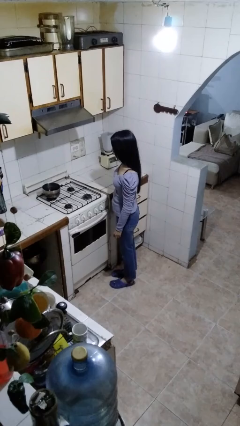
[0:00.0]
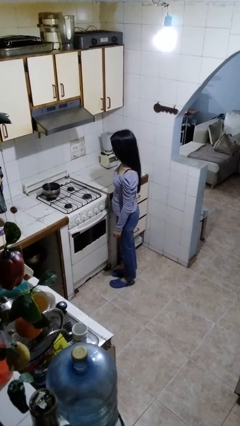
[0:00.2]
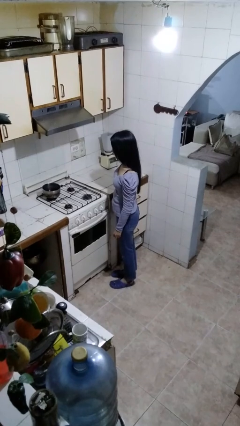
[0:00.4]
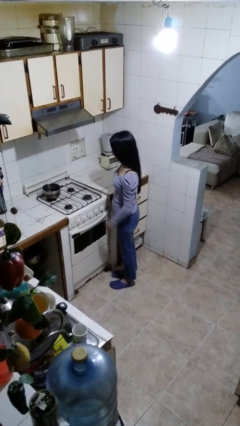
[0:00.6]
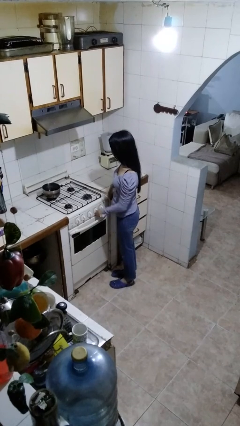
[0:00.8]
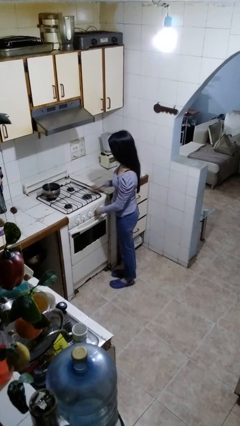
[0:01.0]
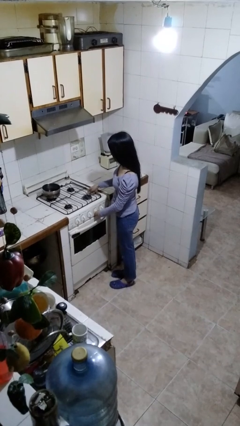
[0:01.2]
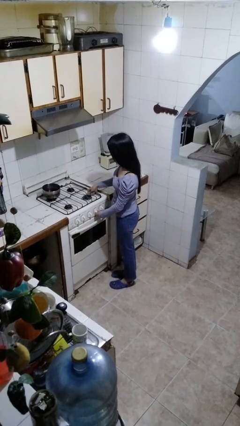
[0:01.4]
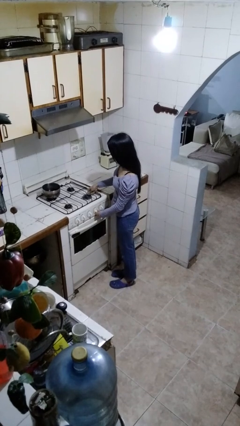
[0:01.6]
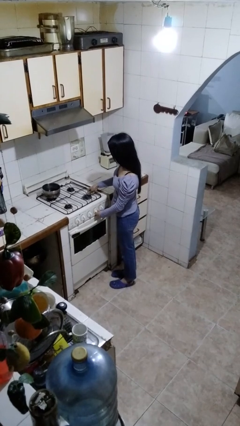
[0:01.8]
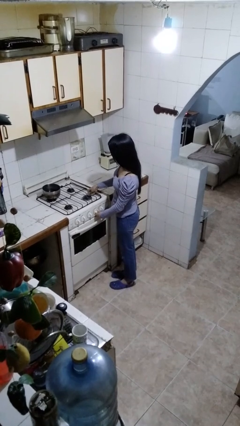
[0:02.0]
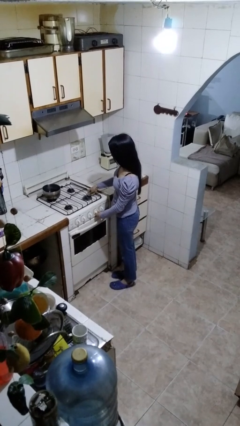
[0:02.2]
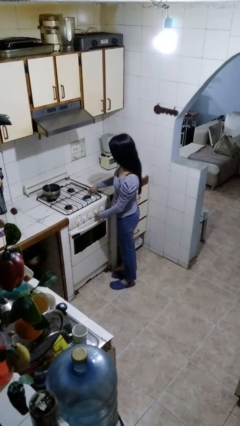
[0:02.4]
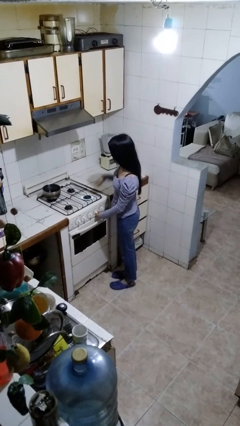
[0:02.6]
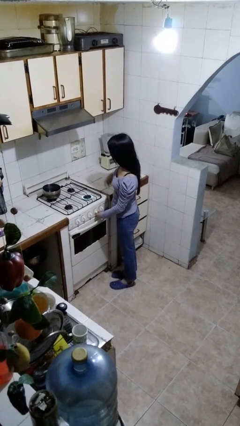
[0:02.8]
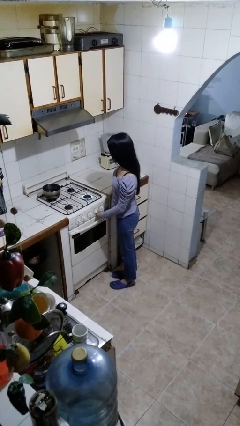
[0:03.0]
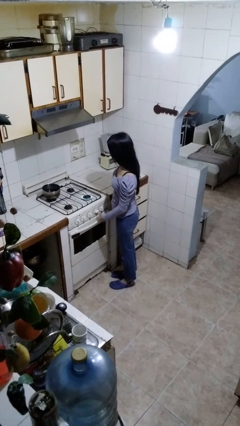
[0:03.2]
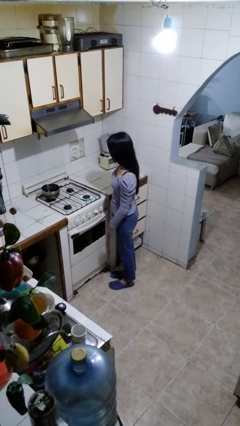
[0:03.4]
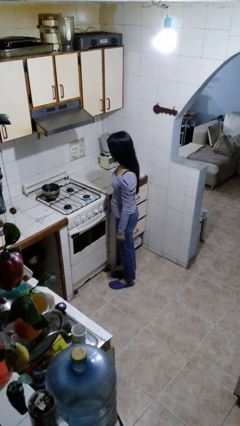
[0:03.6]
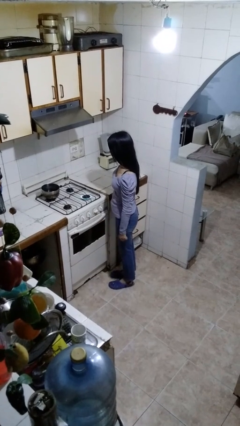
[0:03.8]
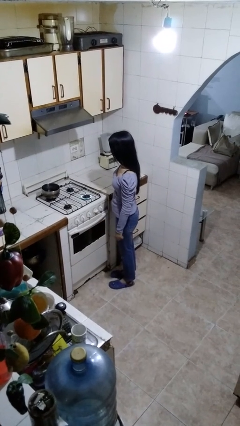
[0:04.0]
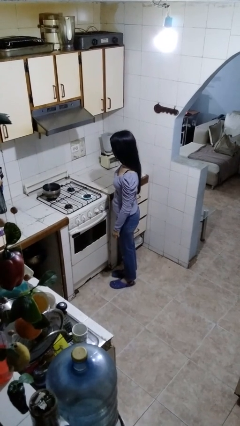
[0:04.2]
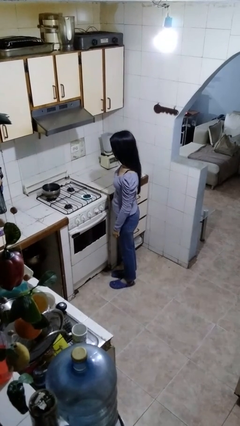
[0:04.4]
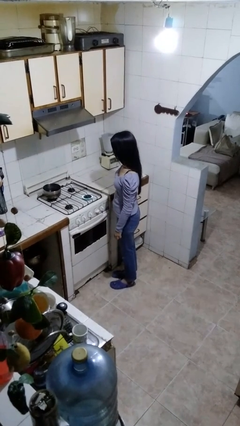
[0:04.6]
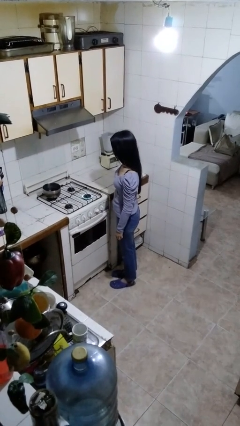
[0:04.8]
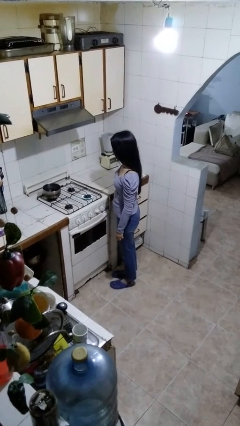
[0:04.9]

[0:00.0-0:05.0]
person turns on stovetop

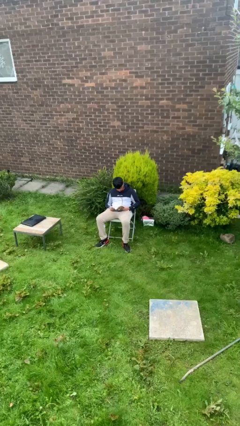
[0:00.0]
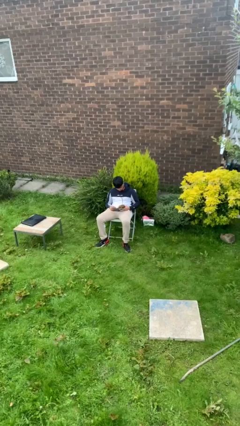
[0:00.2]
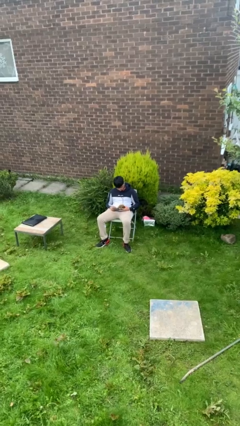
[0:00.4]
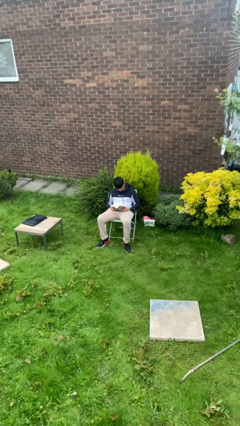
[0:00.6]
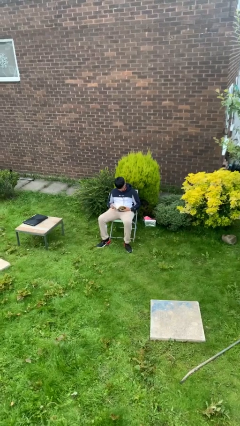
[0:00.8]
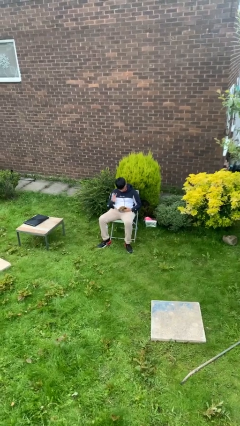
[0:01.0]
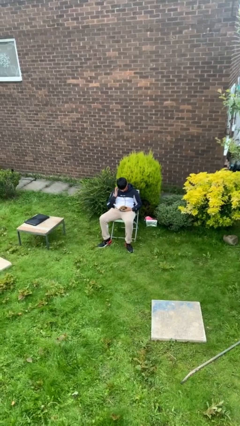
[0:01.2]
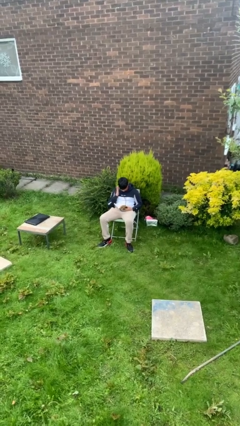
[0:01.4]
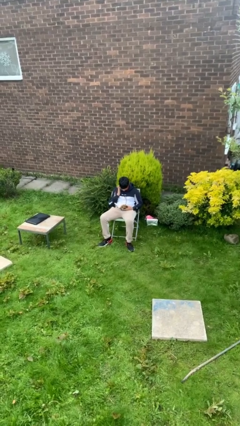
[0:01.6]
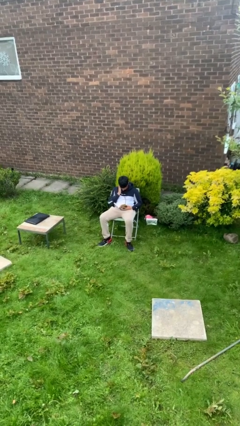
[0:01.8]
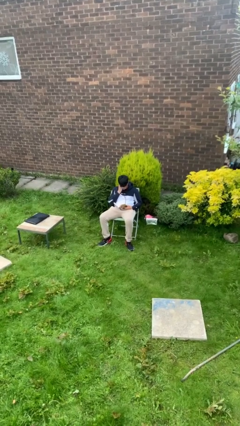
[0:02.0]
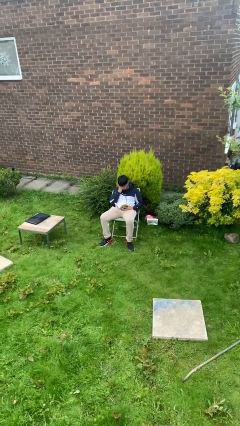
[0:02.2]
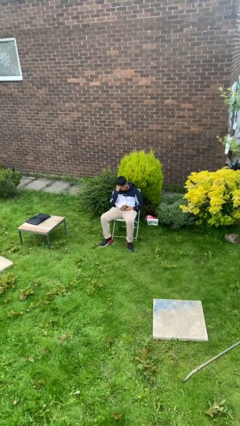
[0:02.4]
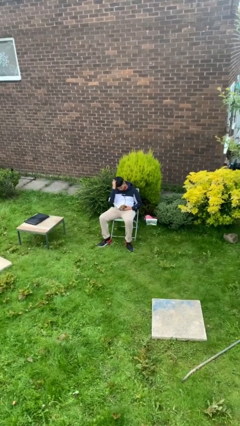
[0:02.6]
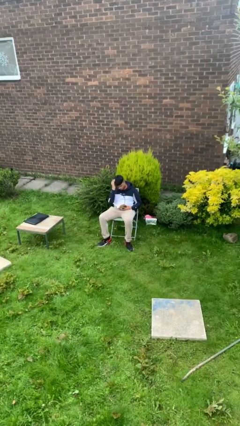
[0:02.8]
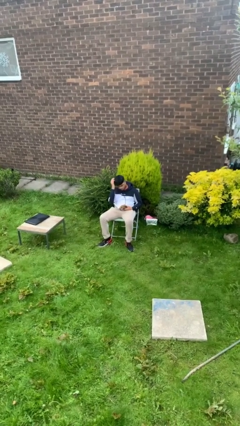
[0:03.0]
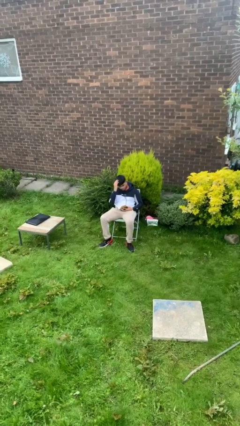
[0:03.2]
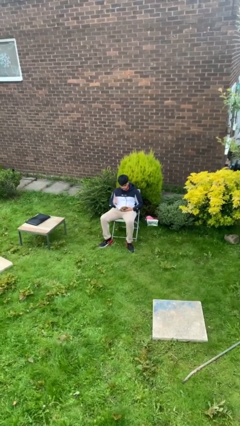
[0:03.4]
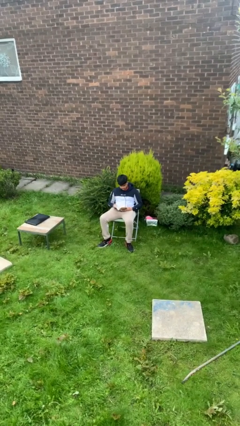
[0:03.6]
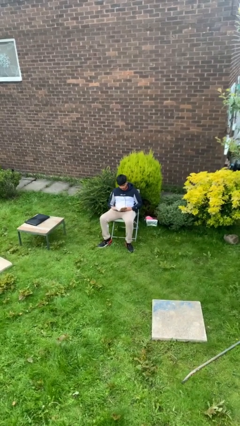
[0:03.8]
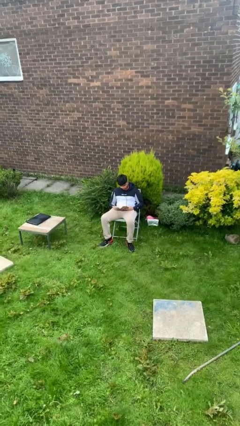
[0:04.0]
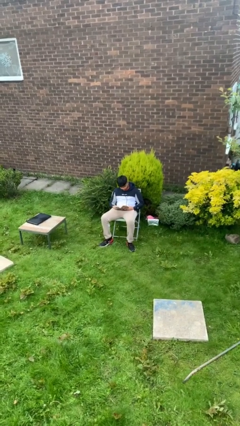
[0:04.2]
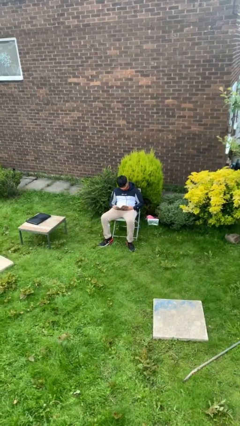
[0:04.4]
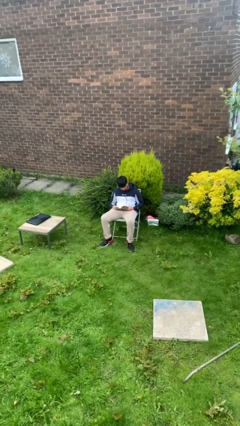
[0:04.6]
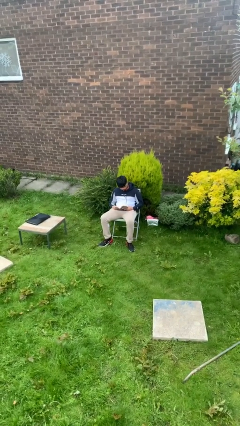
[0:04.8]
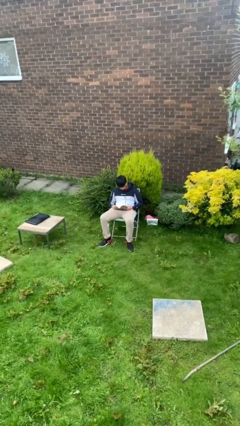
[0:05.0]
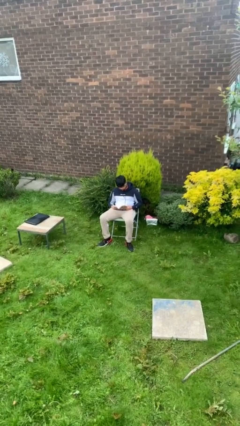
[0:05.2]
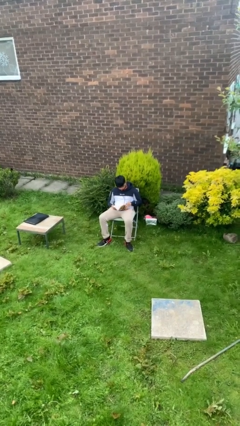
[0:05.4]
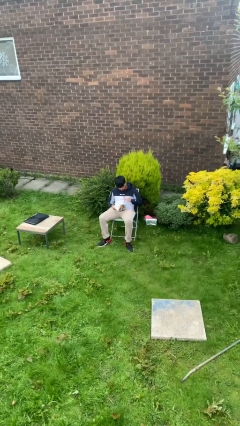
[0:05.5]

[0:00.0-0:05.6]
person reads document

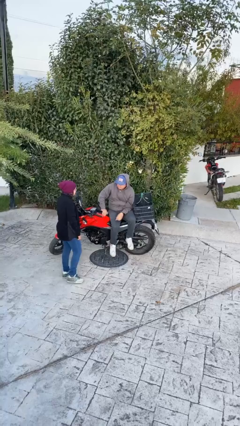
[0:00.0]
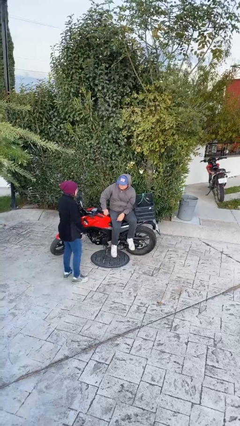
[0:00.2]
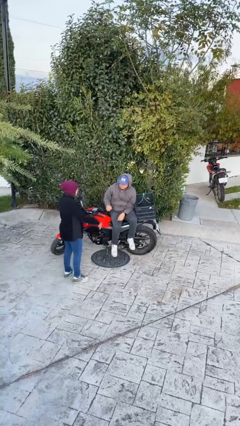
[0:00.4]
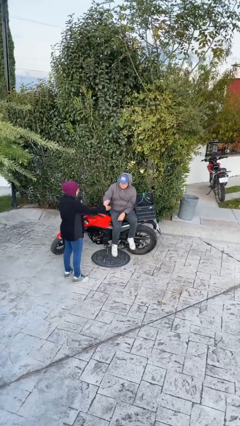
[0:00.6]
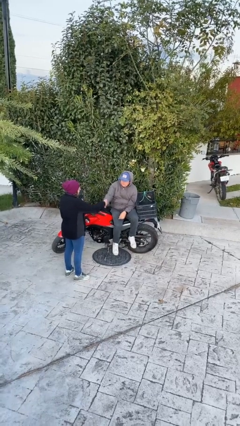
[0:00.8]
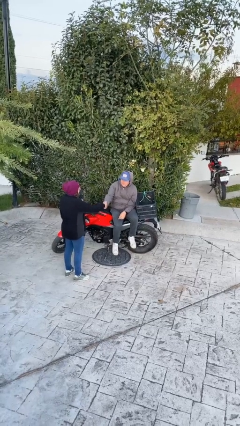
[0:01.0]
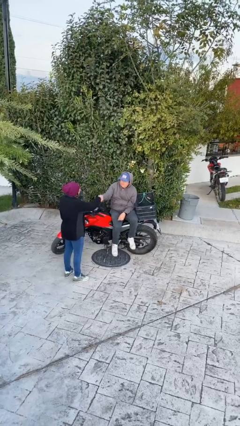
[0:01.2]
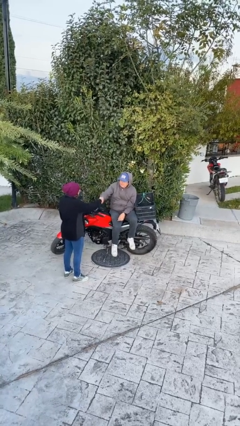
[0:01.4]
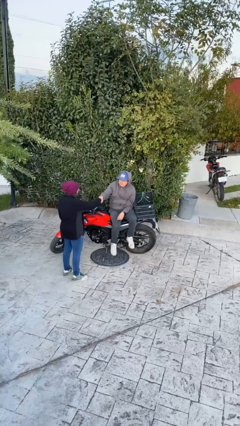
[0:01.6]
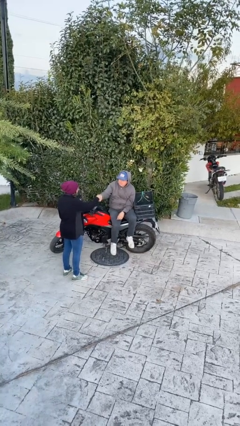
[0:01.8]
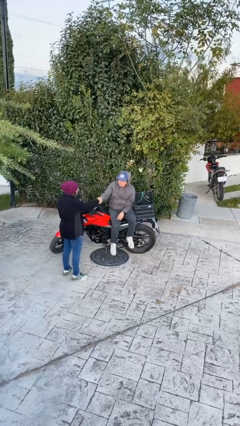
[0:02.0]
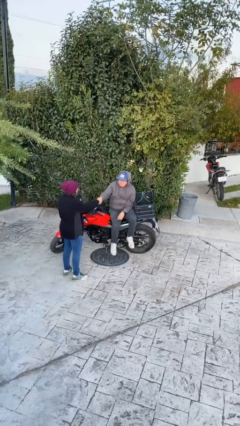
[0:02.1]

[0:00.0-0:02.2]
person shakes hand

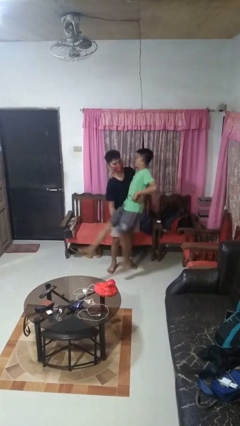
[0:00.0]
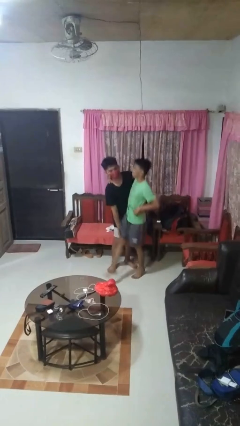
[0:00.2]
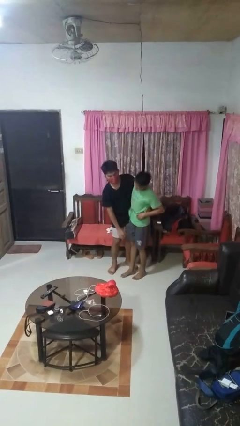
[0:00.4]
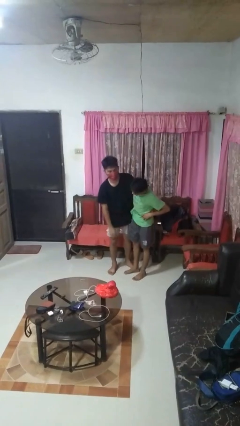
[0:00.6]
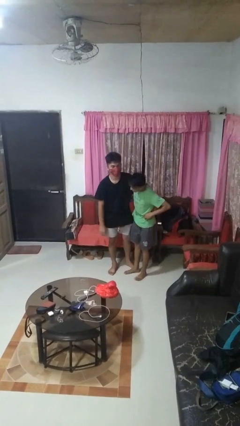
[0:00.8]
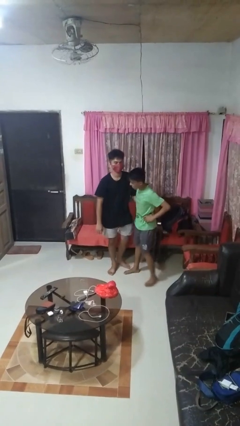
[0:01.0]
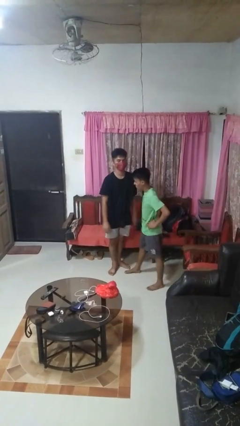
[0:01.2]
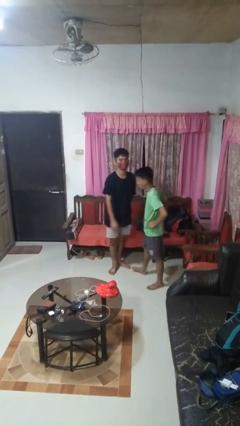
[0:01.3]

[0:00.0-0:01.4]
person puts down person

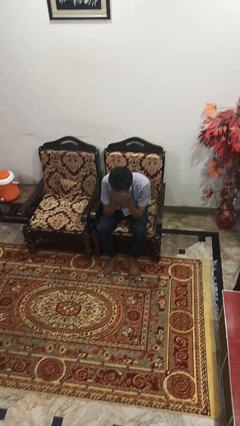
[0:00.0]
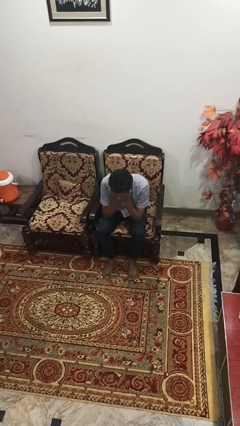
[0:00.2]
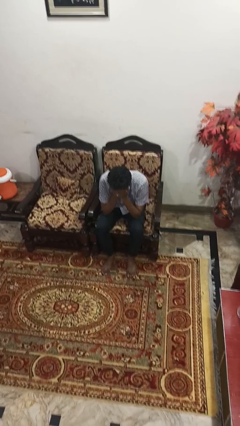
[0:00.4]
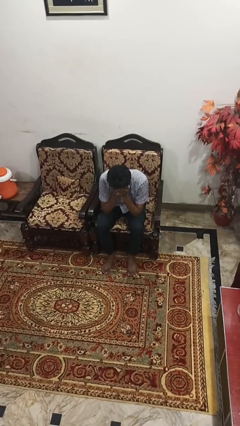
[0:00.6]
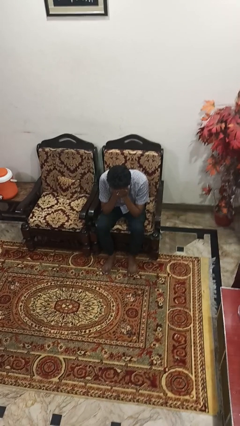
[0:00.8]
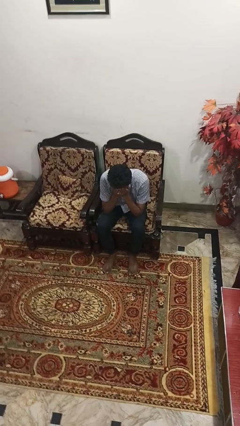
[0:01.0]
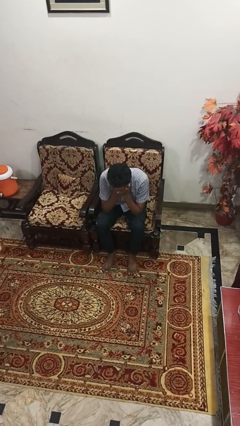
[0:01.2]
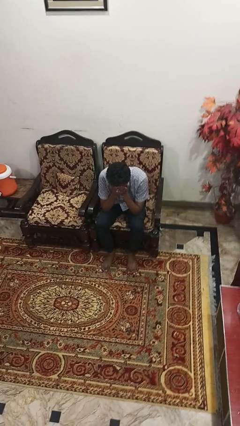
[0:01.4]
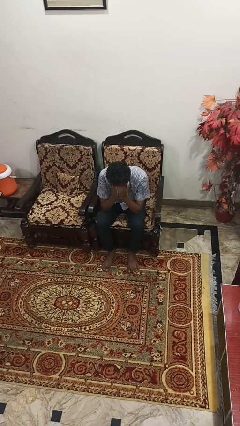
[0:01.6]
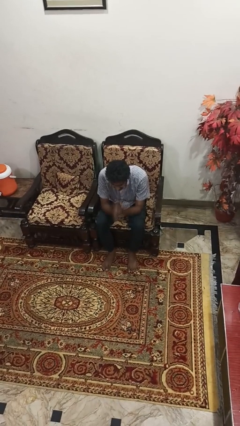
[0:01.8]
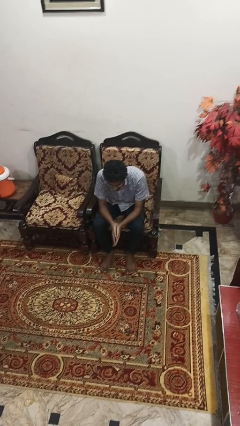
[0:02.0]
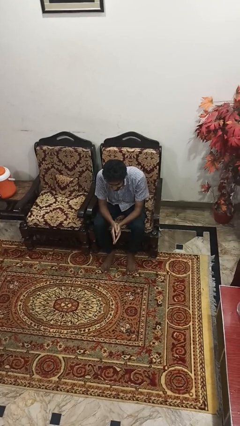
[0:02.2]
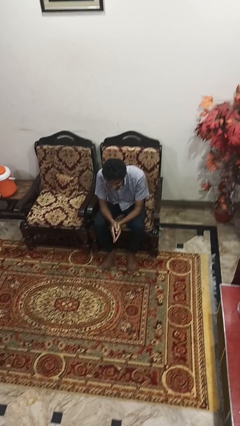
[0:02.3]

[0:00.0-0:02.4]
person covers face with hands

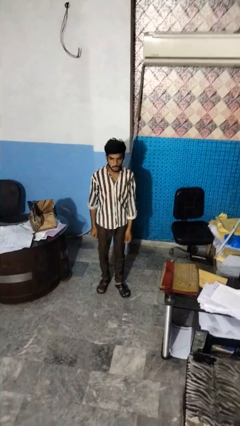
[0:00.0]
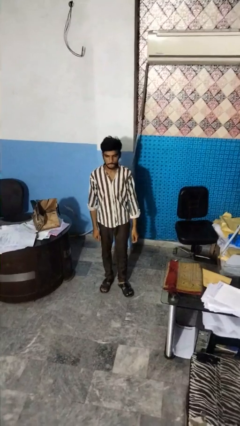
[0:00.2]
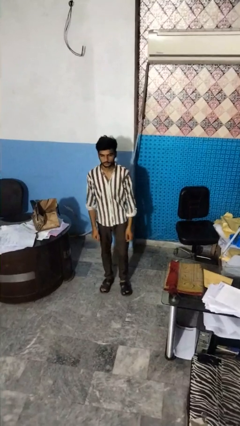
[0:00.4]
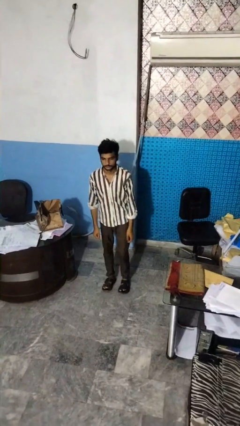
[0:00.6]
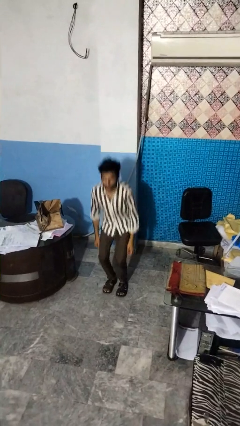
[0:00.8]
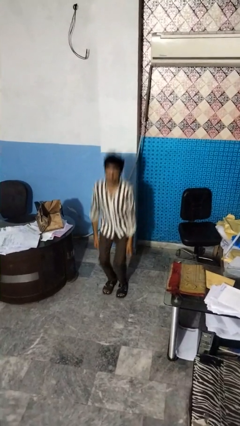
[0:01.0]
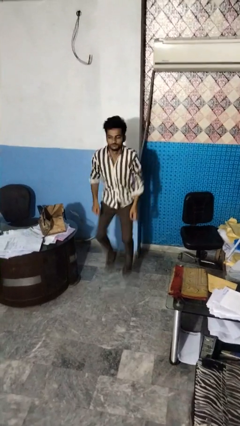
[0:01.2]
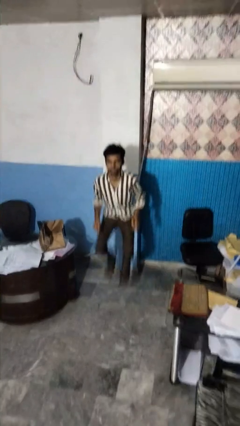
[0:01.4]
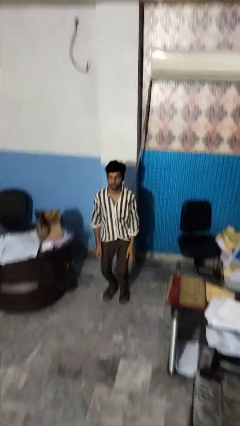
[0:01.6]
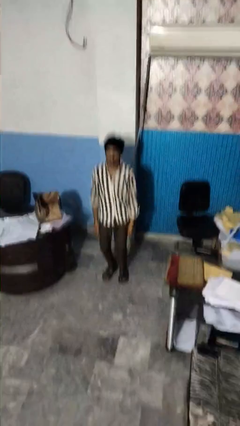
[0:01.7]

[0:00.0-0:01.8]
person jumps
